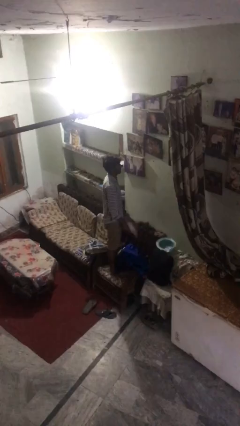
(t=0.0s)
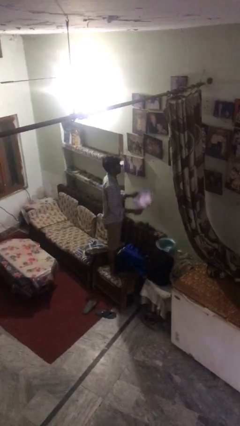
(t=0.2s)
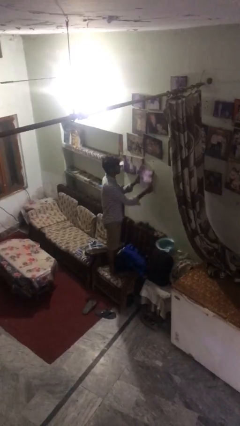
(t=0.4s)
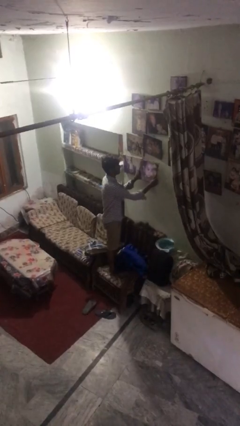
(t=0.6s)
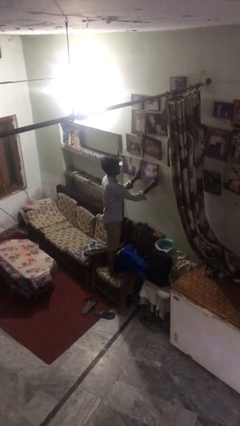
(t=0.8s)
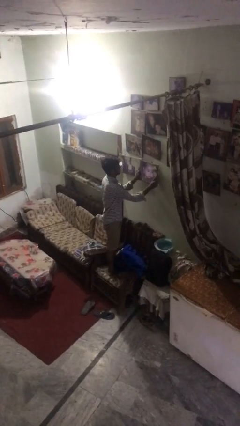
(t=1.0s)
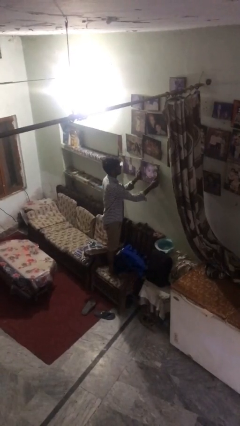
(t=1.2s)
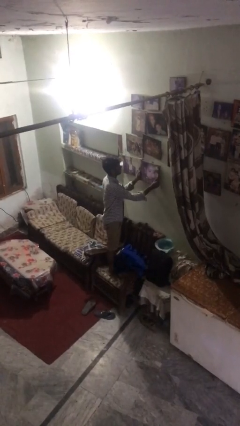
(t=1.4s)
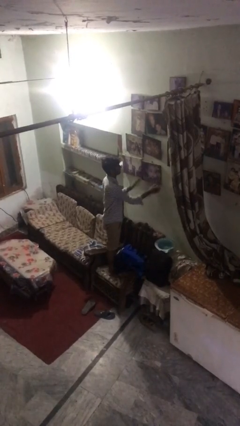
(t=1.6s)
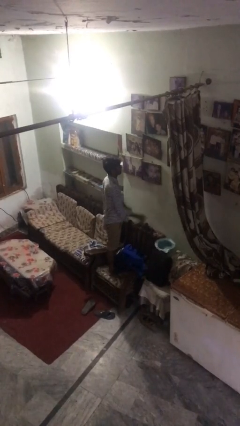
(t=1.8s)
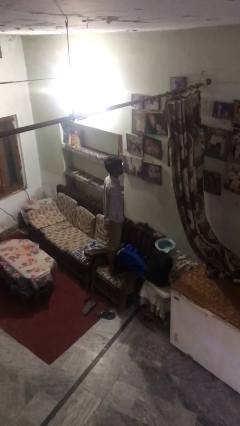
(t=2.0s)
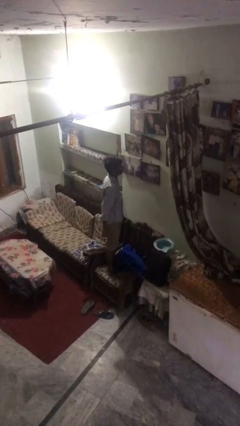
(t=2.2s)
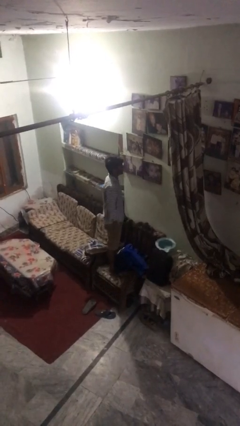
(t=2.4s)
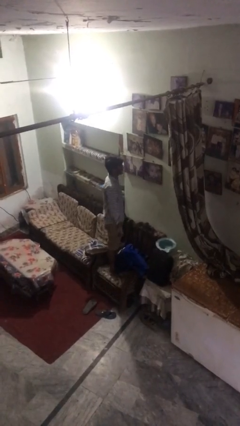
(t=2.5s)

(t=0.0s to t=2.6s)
person puts up picture frame

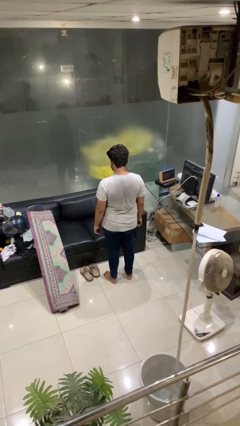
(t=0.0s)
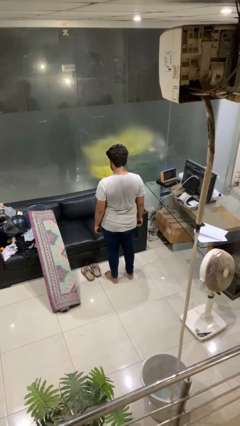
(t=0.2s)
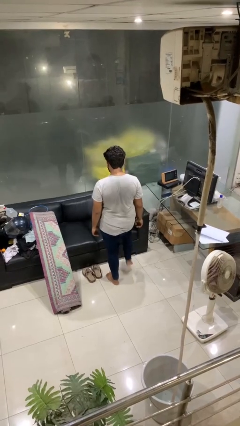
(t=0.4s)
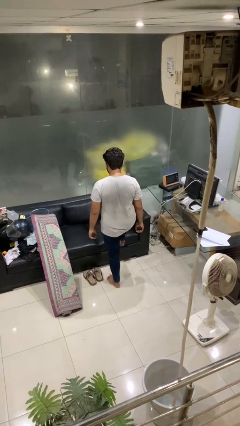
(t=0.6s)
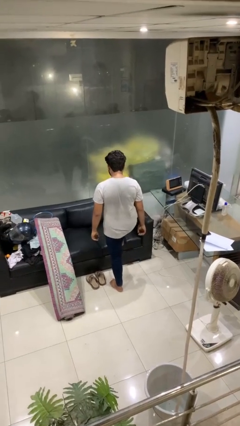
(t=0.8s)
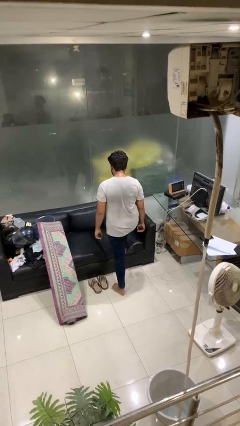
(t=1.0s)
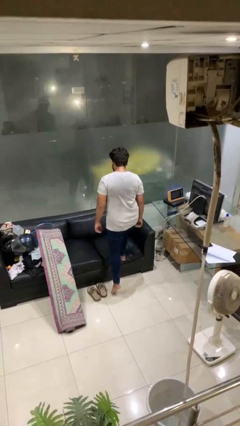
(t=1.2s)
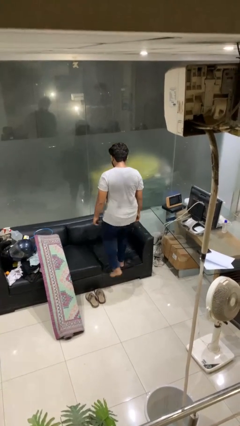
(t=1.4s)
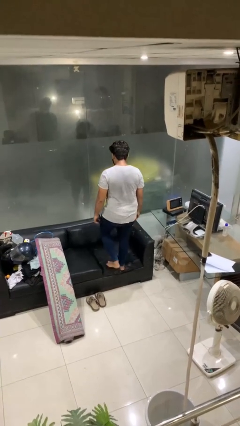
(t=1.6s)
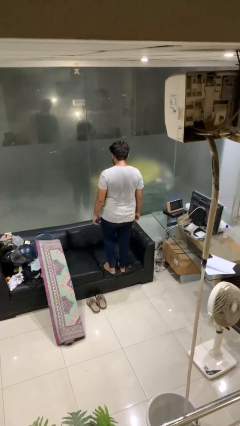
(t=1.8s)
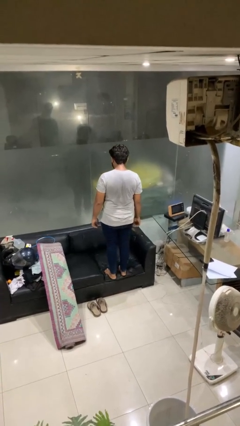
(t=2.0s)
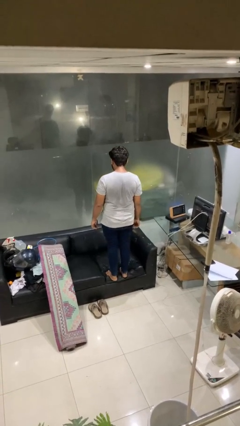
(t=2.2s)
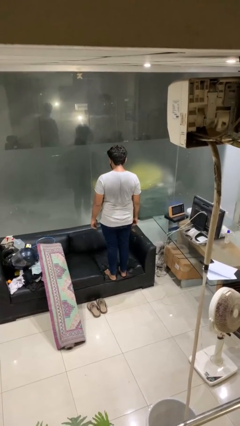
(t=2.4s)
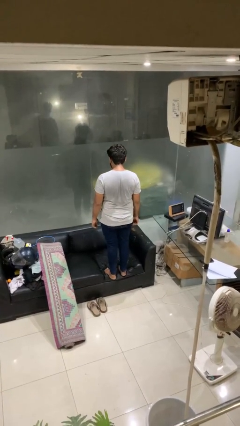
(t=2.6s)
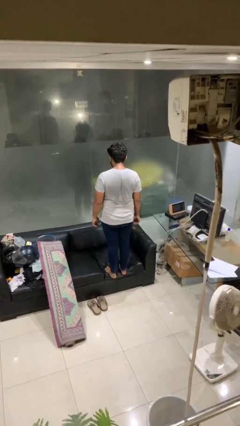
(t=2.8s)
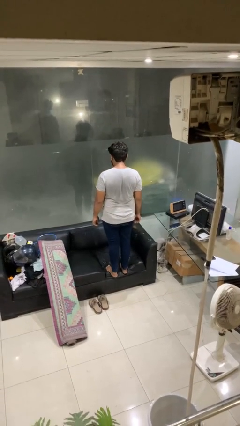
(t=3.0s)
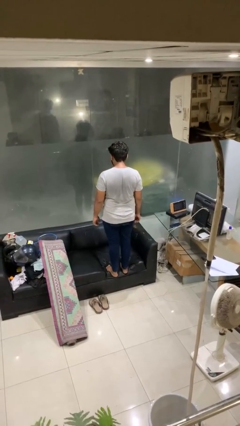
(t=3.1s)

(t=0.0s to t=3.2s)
person climbs on couch

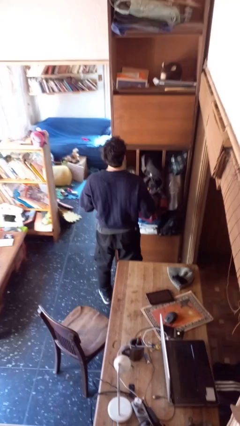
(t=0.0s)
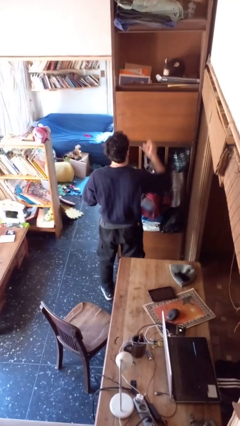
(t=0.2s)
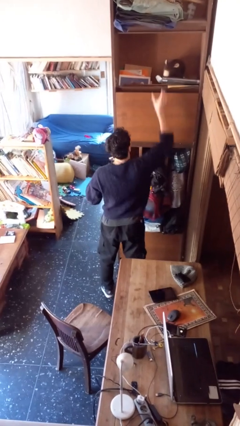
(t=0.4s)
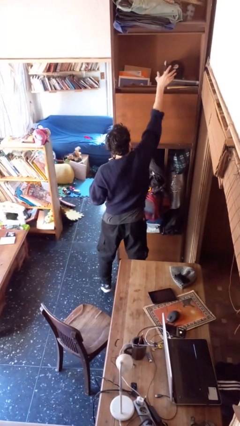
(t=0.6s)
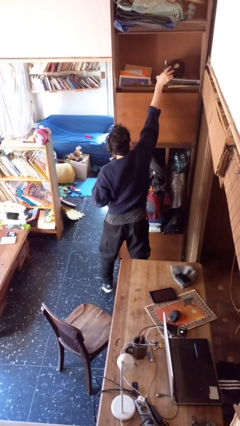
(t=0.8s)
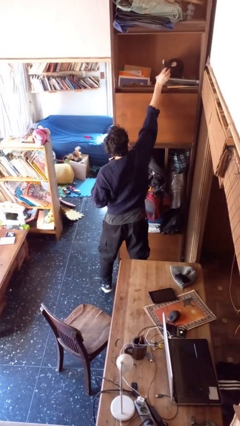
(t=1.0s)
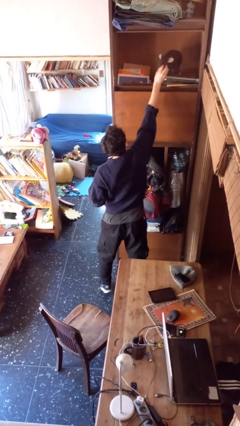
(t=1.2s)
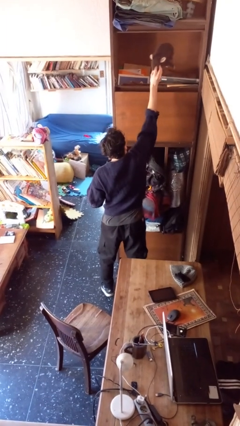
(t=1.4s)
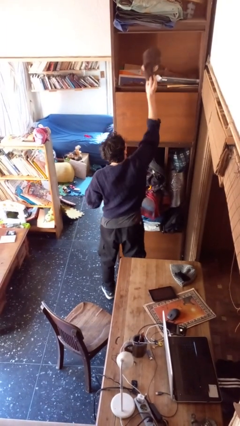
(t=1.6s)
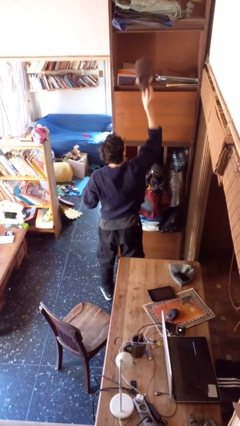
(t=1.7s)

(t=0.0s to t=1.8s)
person picks up object from shelf

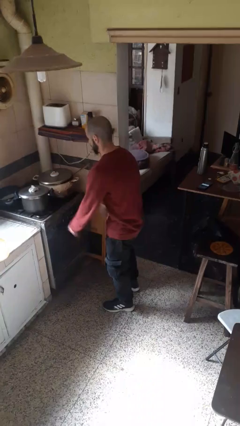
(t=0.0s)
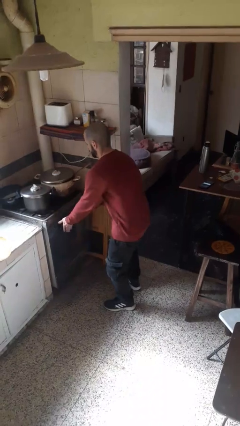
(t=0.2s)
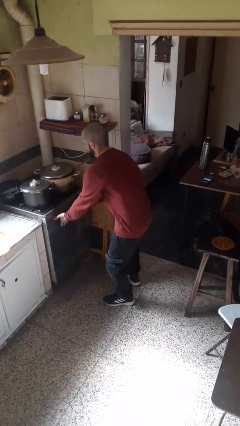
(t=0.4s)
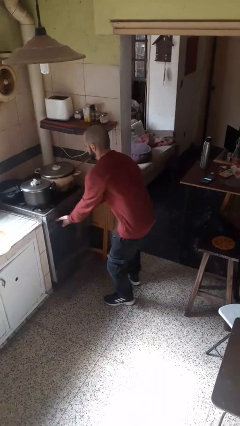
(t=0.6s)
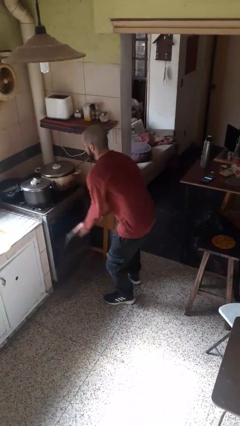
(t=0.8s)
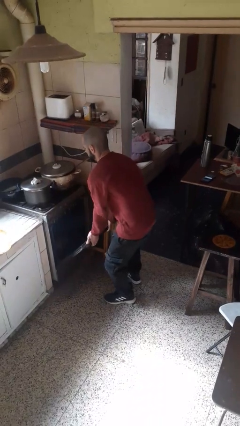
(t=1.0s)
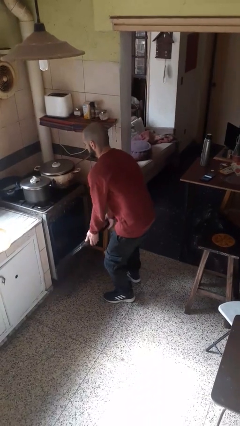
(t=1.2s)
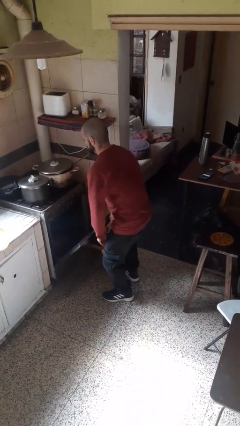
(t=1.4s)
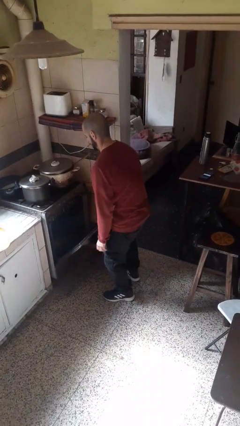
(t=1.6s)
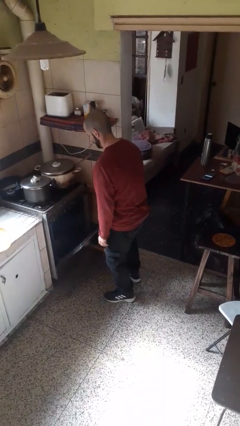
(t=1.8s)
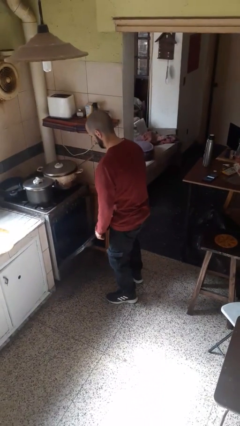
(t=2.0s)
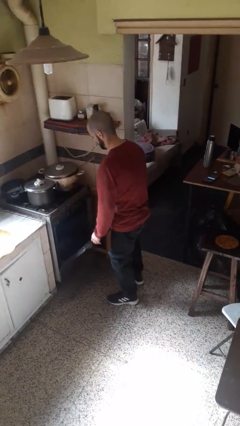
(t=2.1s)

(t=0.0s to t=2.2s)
person opens oven door

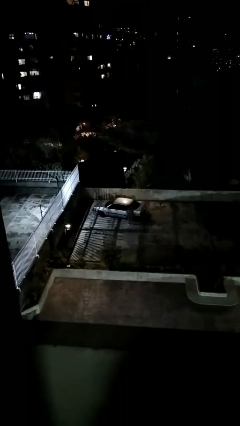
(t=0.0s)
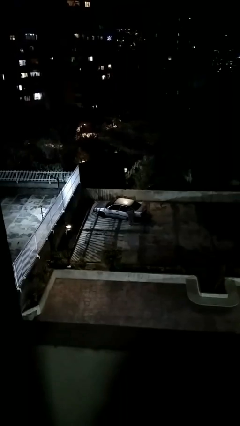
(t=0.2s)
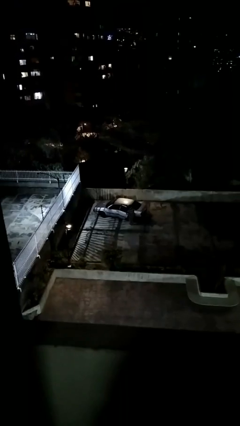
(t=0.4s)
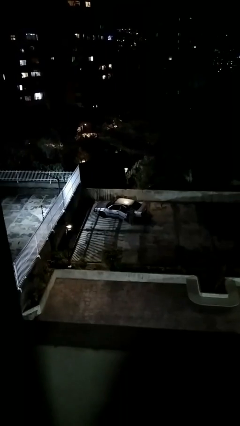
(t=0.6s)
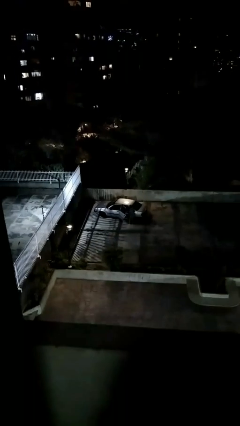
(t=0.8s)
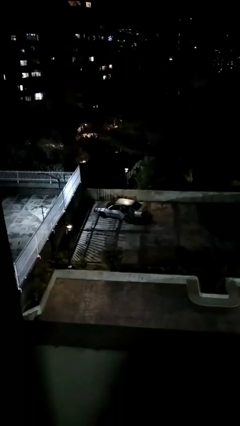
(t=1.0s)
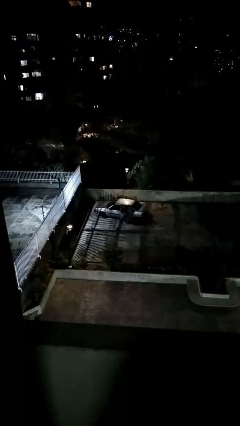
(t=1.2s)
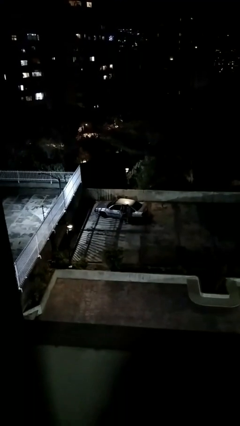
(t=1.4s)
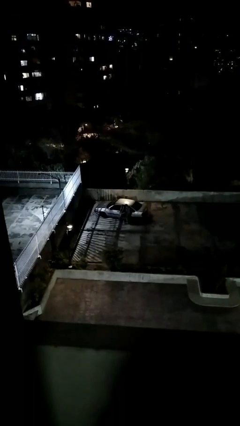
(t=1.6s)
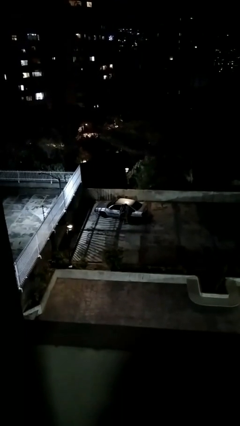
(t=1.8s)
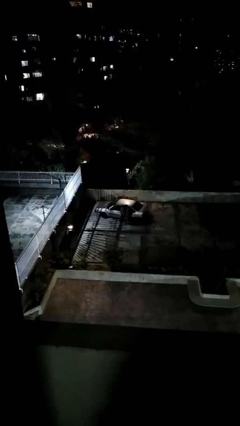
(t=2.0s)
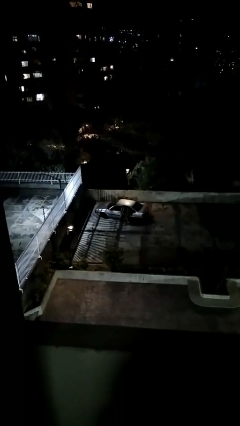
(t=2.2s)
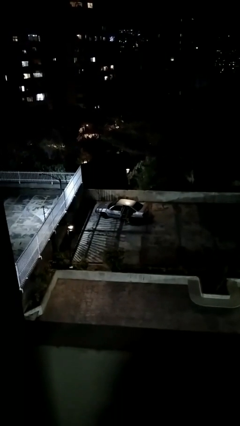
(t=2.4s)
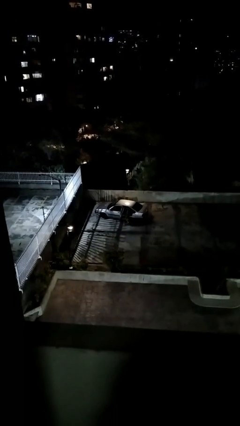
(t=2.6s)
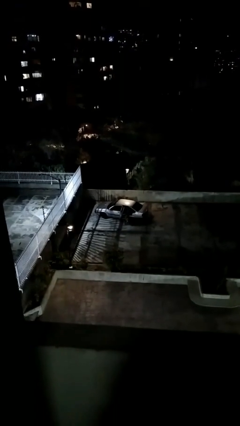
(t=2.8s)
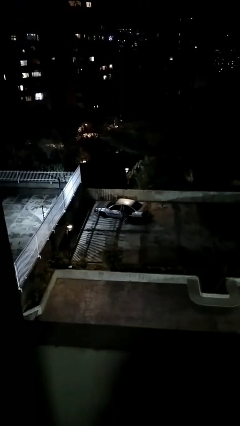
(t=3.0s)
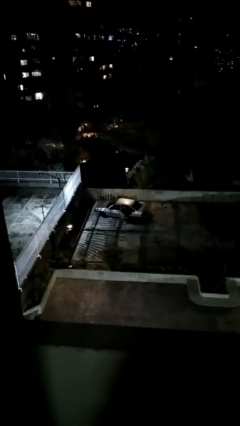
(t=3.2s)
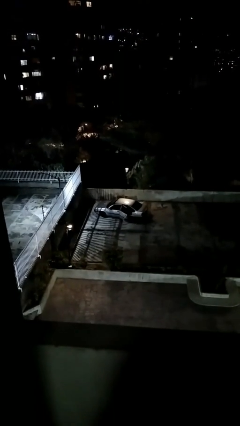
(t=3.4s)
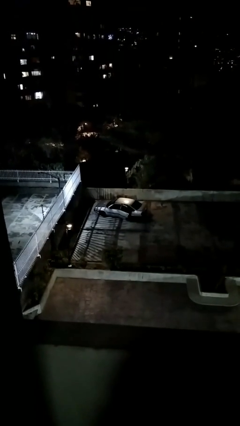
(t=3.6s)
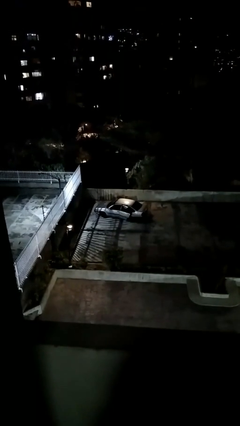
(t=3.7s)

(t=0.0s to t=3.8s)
car picks up person

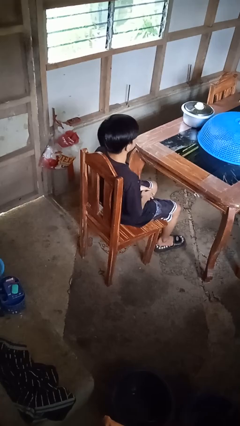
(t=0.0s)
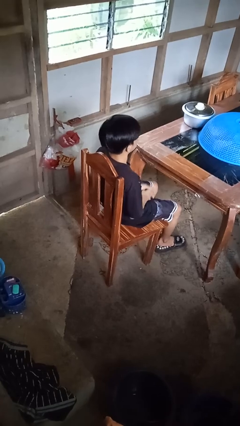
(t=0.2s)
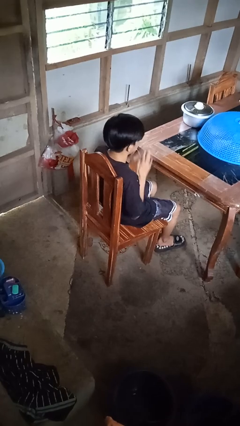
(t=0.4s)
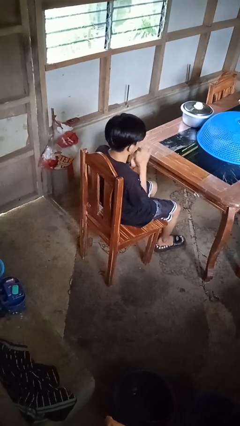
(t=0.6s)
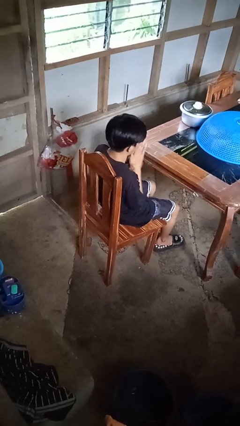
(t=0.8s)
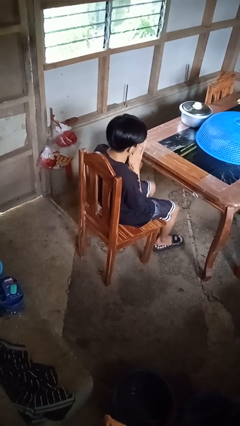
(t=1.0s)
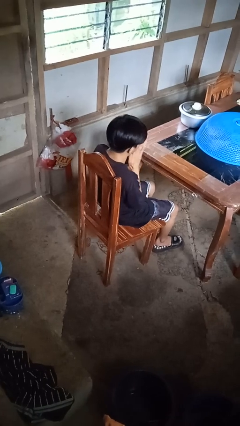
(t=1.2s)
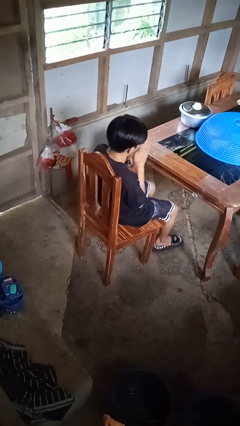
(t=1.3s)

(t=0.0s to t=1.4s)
person blows into hands

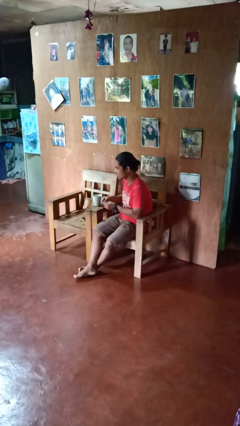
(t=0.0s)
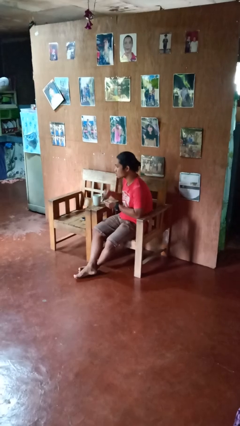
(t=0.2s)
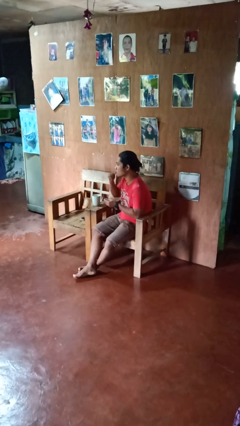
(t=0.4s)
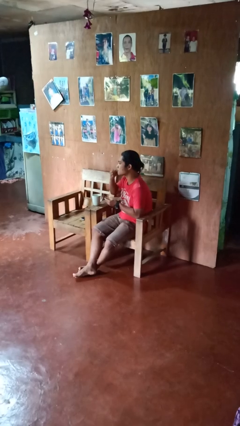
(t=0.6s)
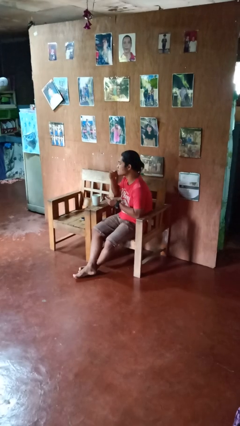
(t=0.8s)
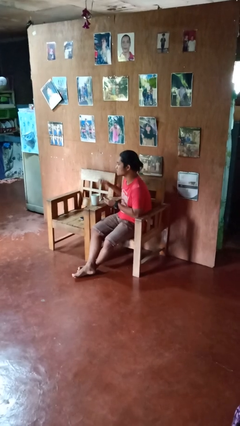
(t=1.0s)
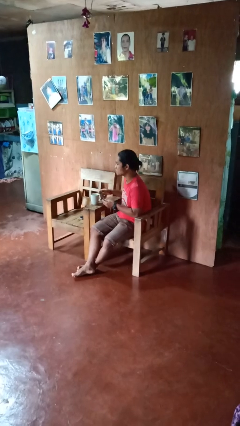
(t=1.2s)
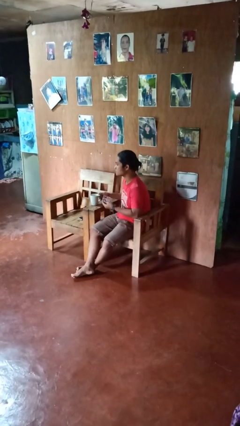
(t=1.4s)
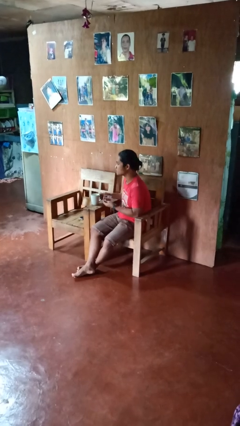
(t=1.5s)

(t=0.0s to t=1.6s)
person takes medicine pills

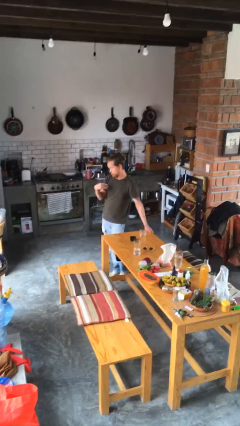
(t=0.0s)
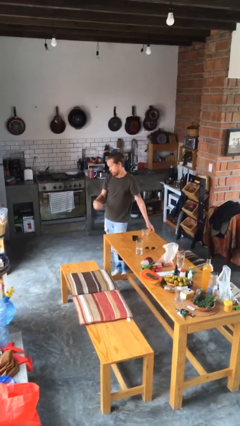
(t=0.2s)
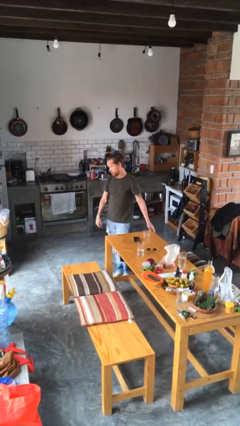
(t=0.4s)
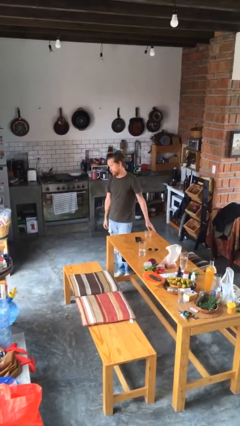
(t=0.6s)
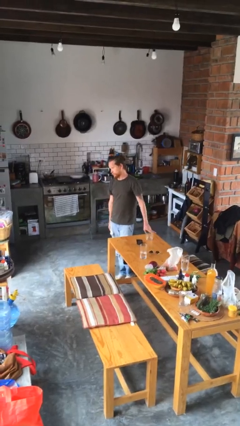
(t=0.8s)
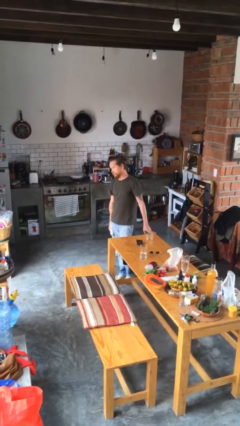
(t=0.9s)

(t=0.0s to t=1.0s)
person gestures come here
